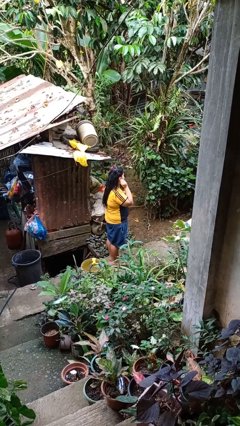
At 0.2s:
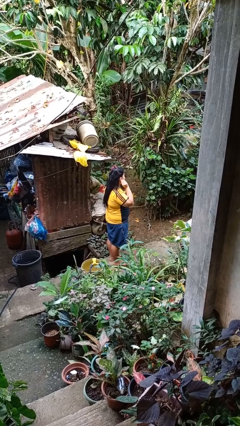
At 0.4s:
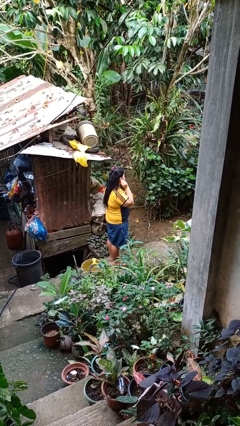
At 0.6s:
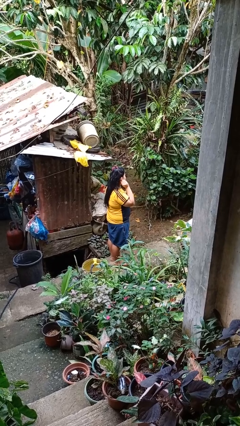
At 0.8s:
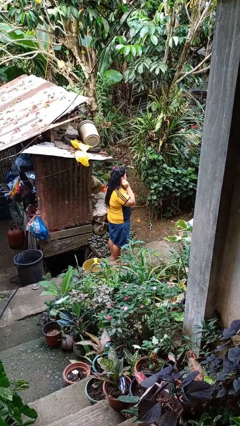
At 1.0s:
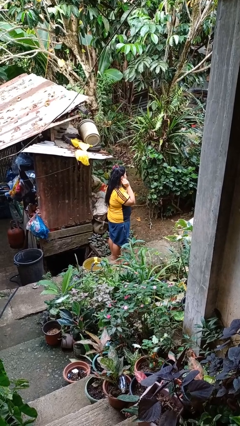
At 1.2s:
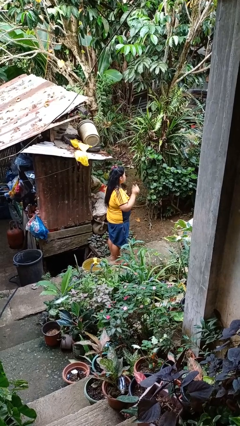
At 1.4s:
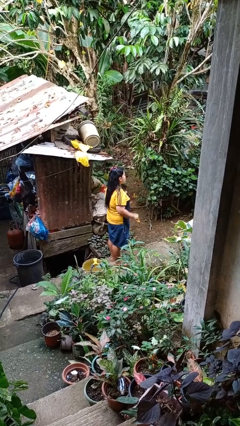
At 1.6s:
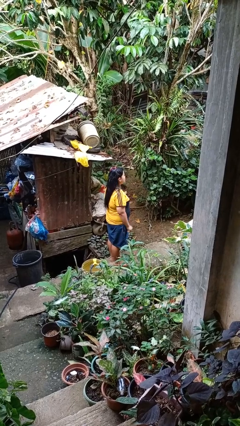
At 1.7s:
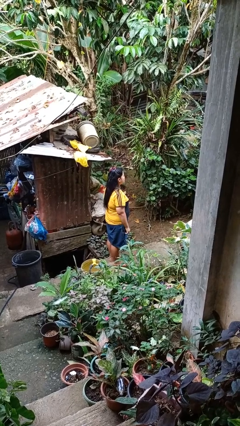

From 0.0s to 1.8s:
person puts on earrings

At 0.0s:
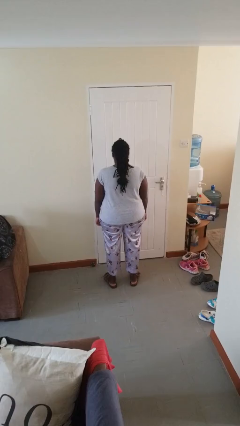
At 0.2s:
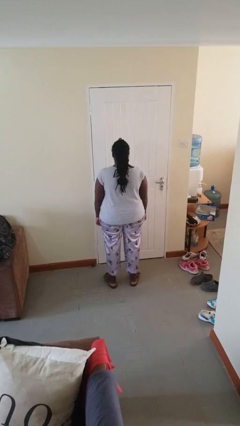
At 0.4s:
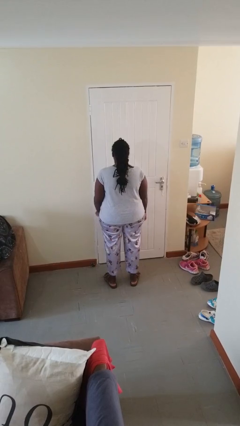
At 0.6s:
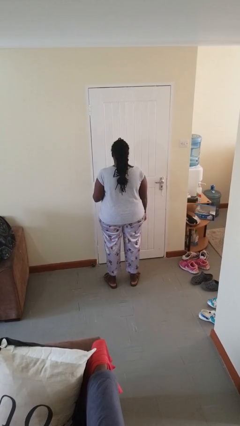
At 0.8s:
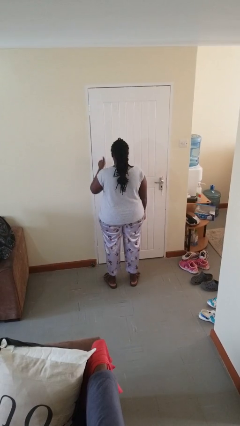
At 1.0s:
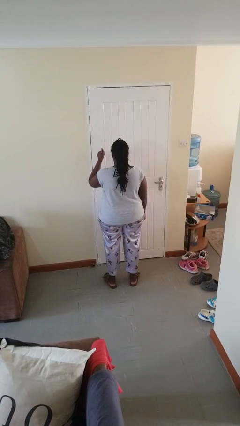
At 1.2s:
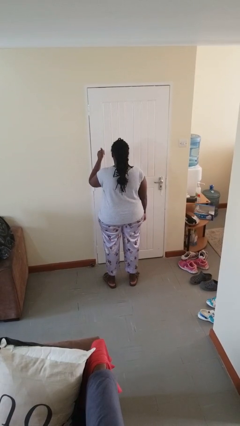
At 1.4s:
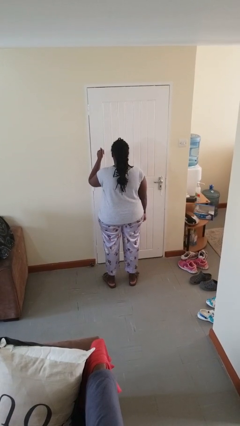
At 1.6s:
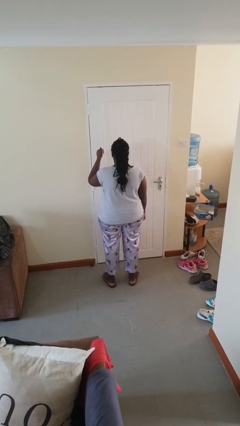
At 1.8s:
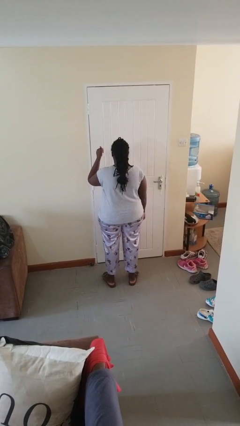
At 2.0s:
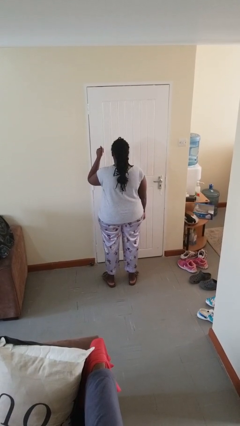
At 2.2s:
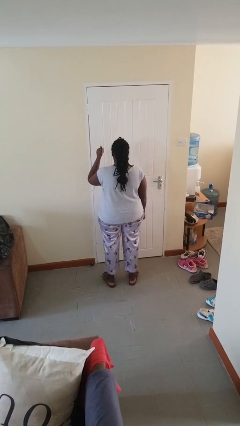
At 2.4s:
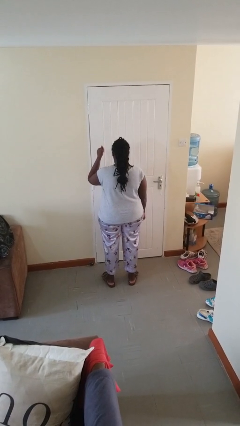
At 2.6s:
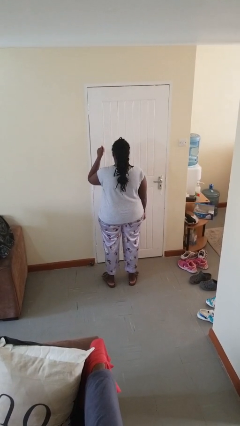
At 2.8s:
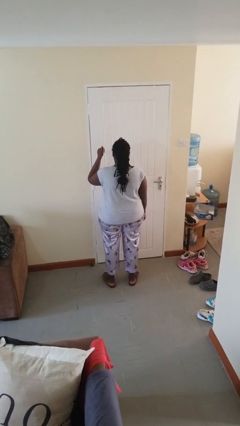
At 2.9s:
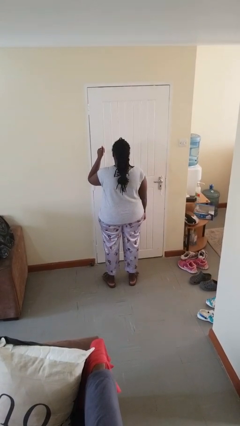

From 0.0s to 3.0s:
person gestures thumbs up

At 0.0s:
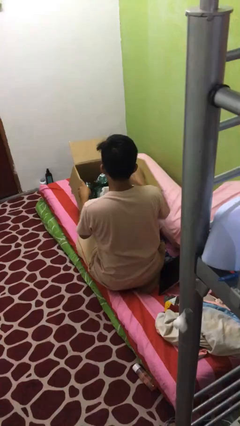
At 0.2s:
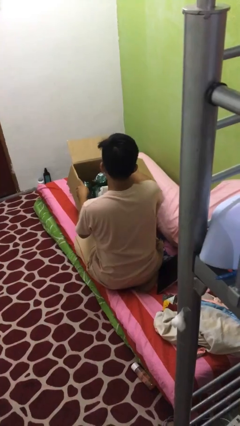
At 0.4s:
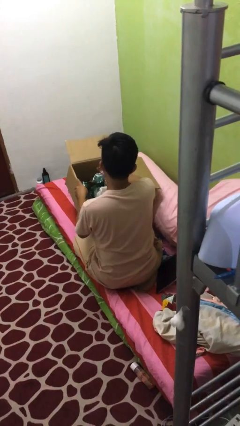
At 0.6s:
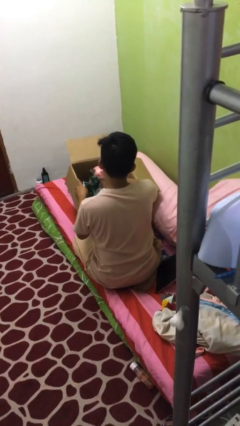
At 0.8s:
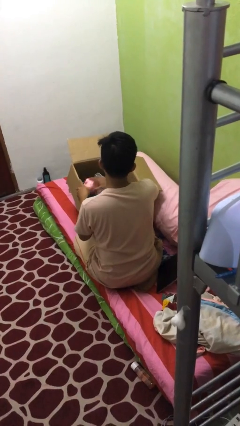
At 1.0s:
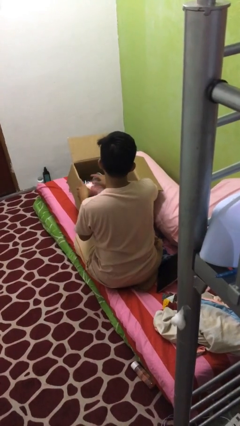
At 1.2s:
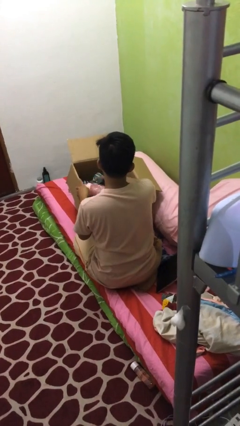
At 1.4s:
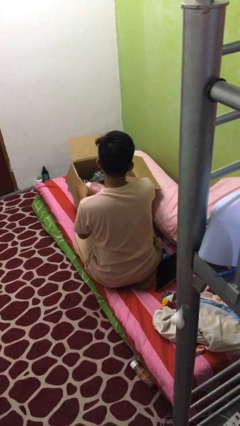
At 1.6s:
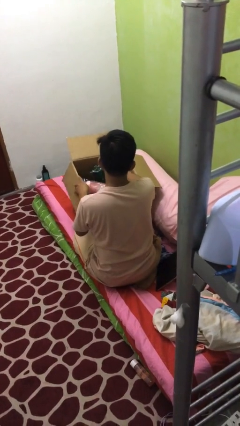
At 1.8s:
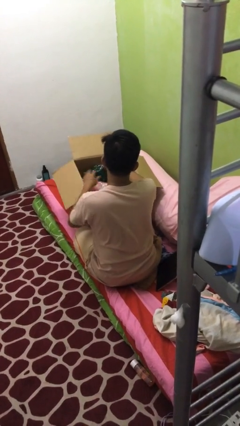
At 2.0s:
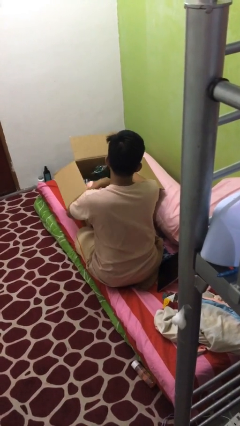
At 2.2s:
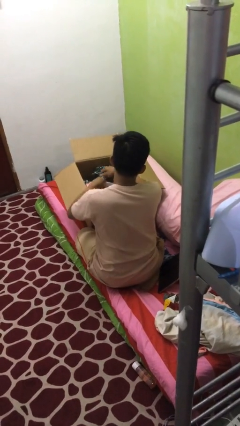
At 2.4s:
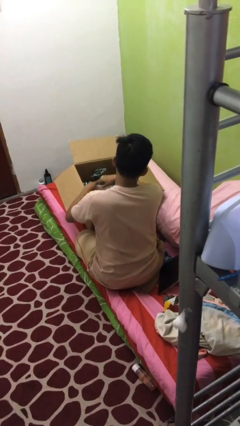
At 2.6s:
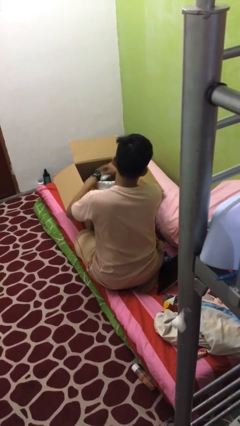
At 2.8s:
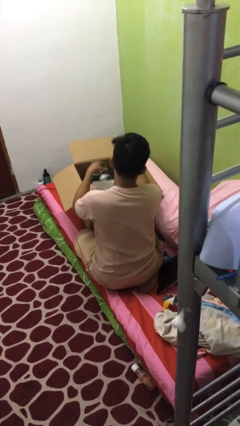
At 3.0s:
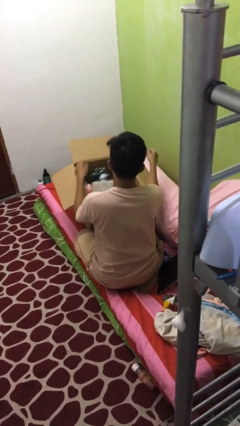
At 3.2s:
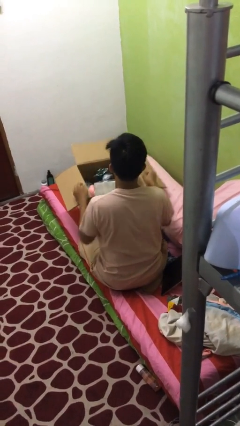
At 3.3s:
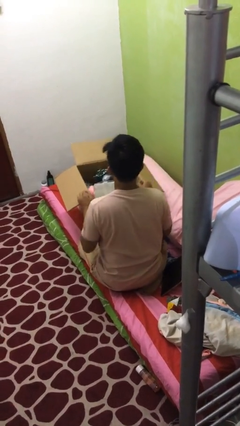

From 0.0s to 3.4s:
person searches in box

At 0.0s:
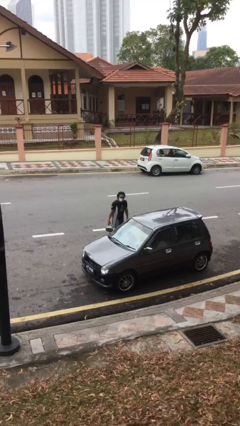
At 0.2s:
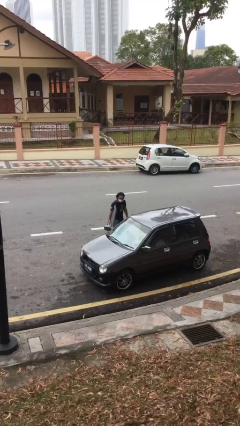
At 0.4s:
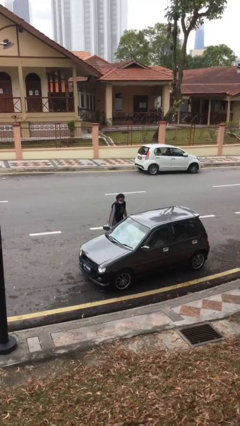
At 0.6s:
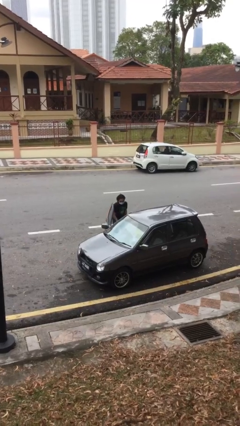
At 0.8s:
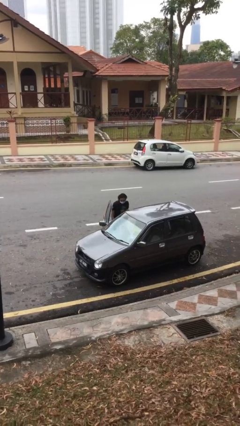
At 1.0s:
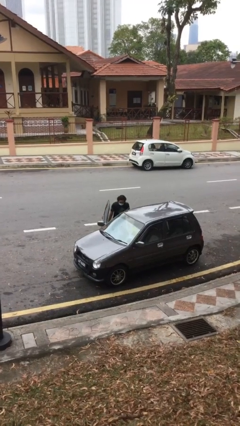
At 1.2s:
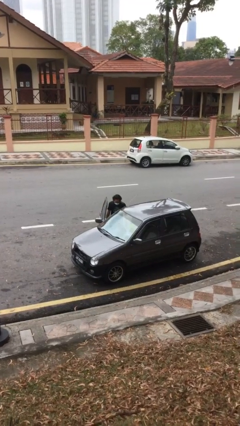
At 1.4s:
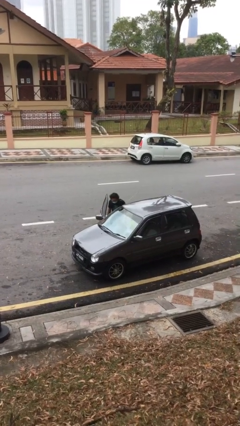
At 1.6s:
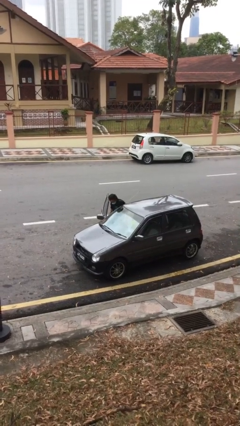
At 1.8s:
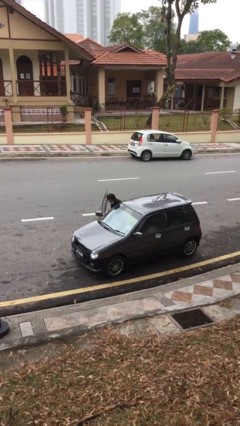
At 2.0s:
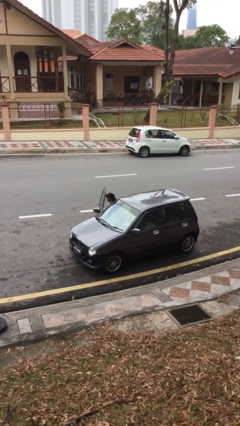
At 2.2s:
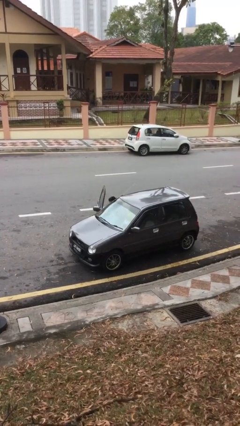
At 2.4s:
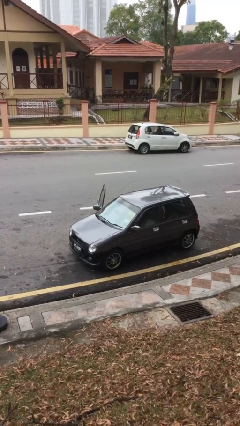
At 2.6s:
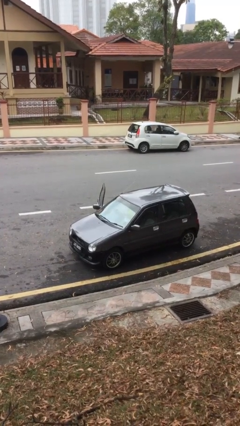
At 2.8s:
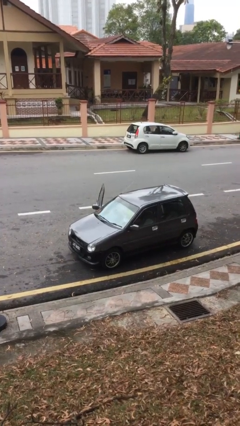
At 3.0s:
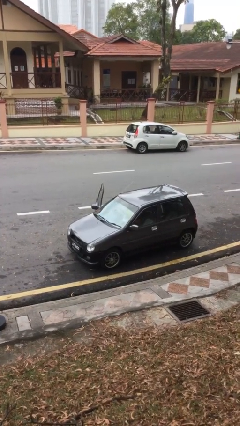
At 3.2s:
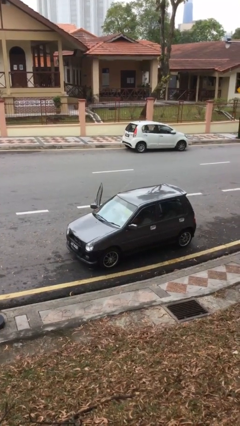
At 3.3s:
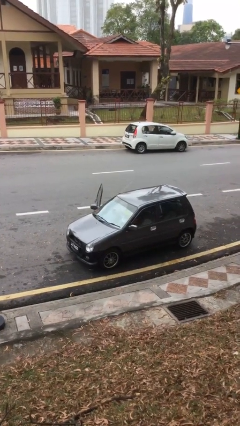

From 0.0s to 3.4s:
person enters car

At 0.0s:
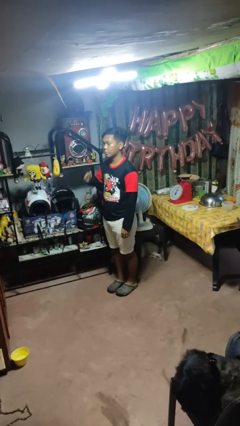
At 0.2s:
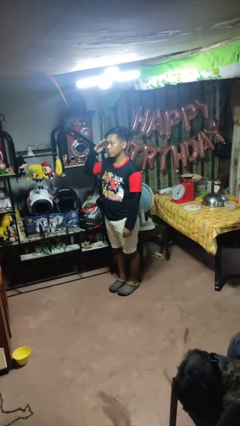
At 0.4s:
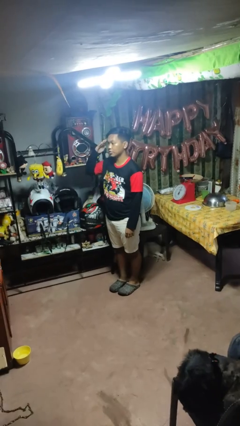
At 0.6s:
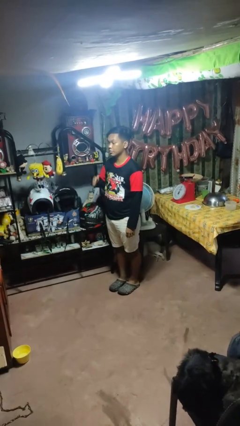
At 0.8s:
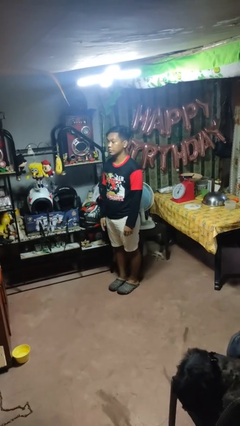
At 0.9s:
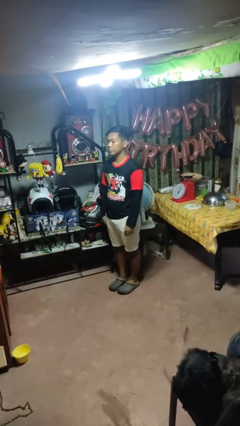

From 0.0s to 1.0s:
person salutes

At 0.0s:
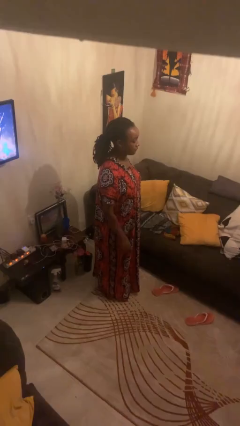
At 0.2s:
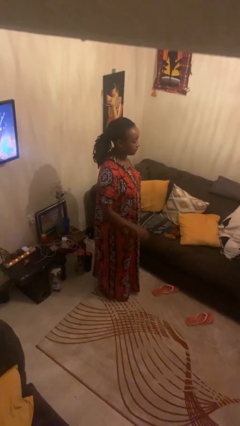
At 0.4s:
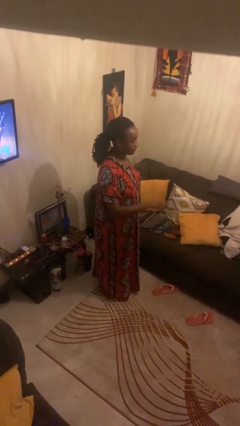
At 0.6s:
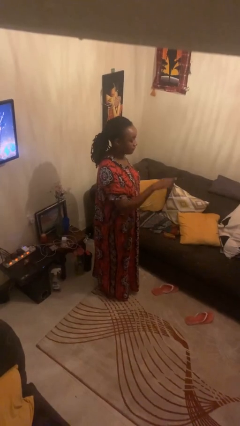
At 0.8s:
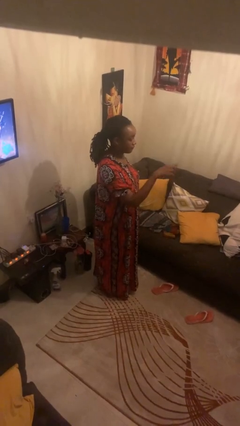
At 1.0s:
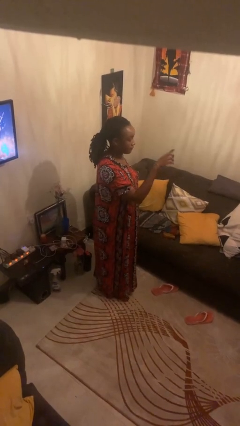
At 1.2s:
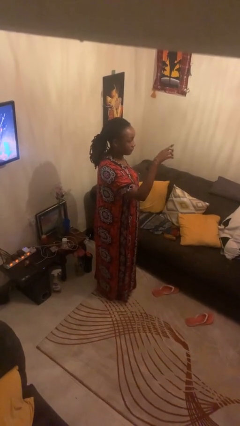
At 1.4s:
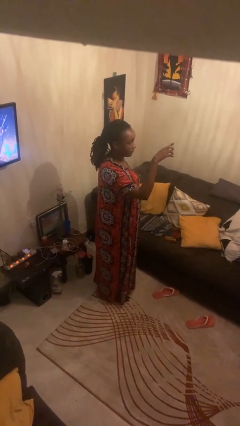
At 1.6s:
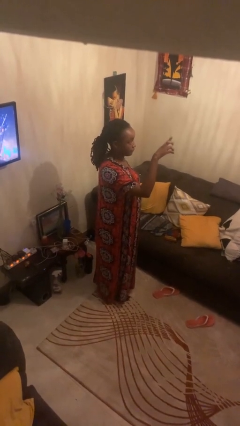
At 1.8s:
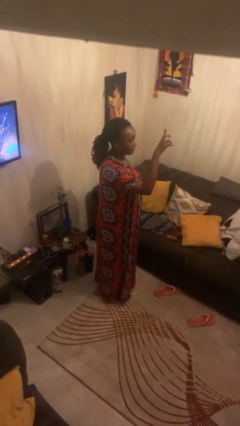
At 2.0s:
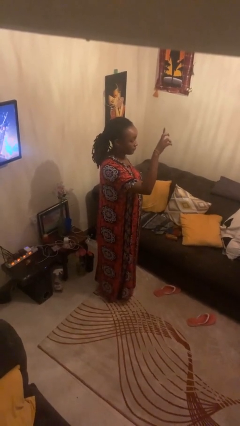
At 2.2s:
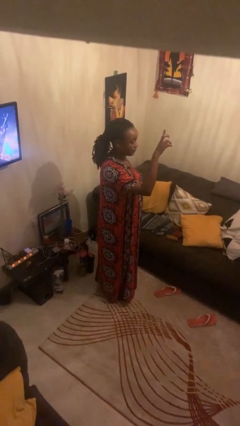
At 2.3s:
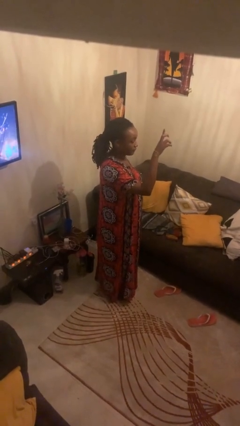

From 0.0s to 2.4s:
person gestures swipe up

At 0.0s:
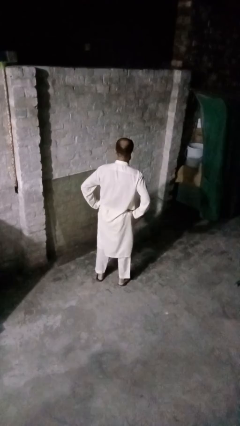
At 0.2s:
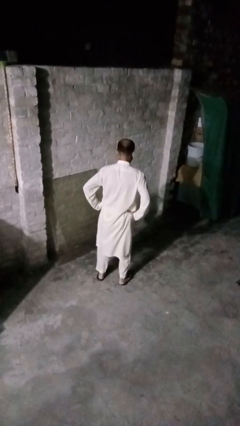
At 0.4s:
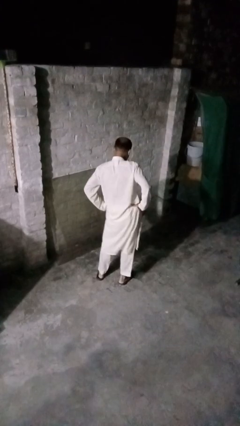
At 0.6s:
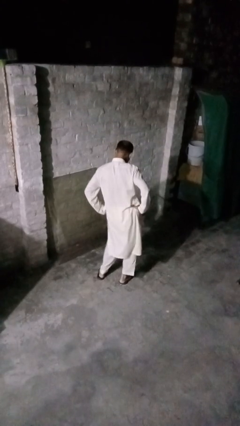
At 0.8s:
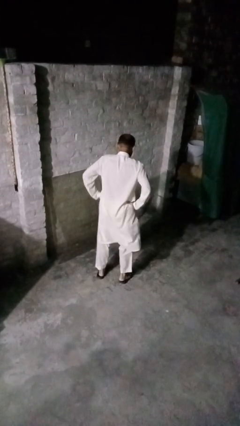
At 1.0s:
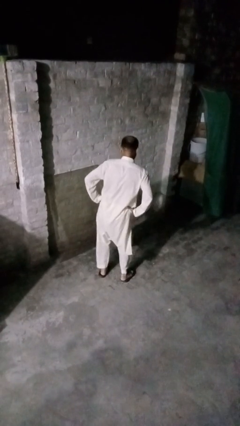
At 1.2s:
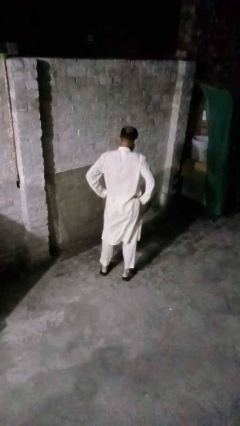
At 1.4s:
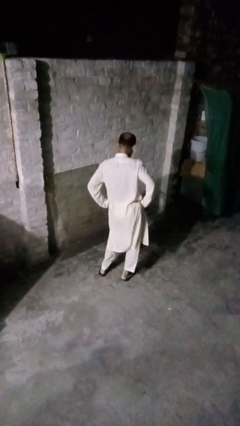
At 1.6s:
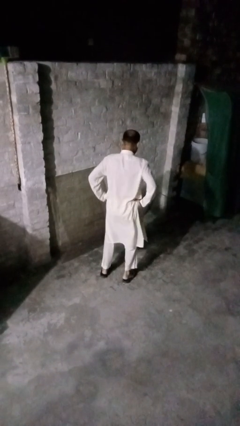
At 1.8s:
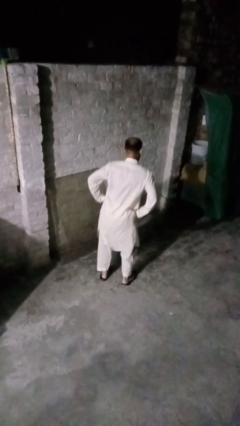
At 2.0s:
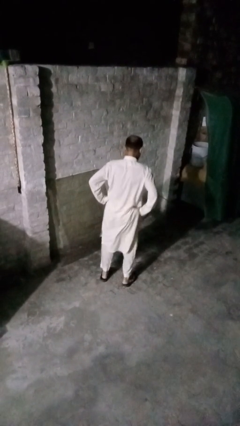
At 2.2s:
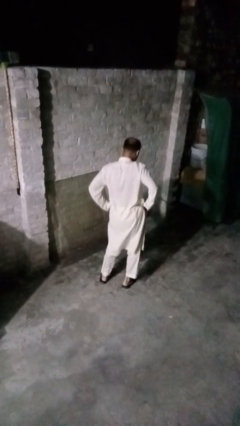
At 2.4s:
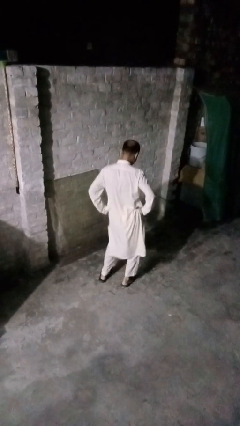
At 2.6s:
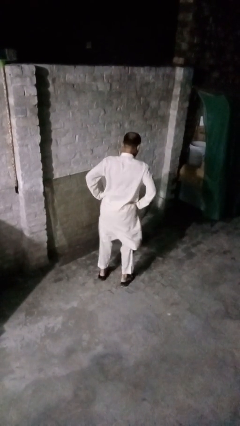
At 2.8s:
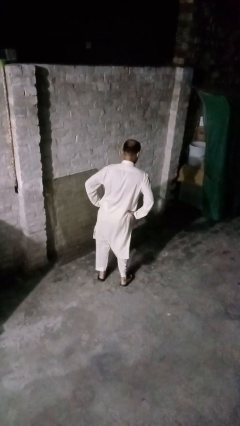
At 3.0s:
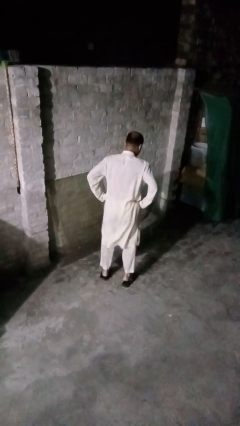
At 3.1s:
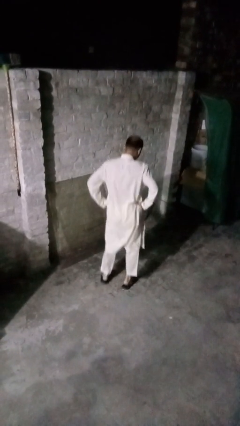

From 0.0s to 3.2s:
person wiggles hips
